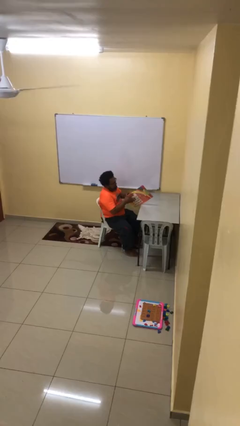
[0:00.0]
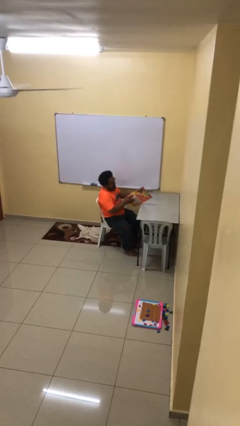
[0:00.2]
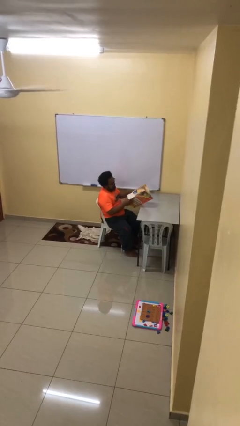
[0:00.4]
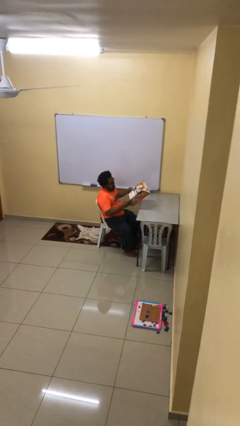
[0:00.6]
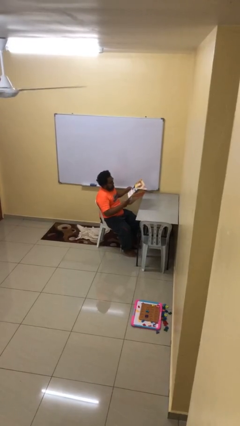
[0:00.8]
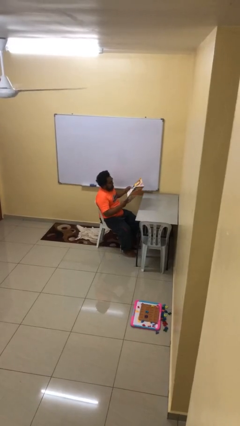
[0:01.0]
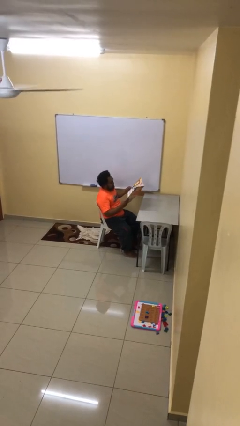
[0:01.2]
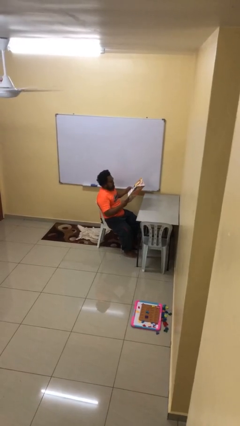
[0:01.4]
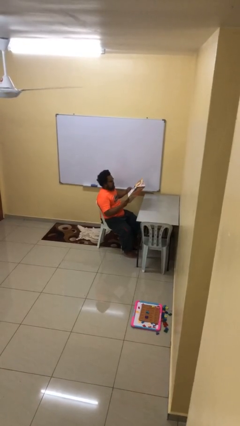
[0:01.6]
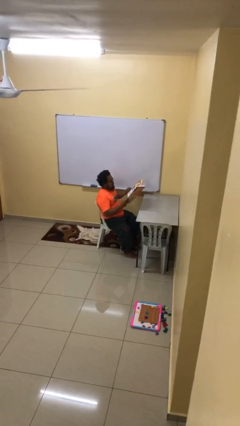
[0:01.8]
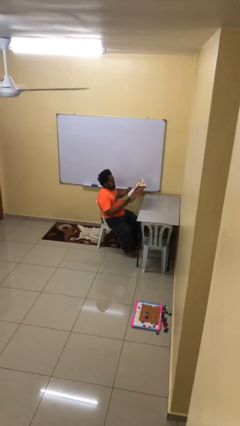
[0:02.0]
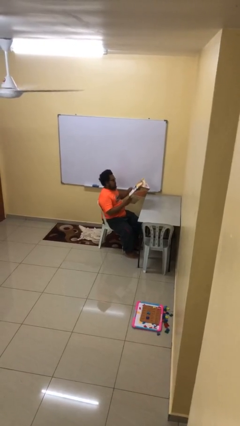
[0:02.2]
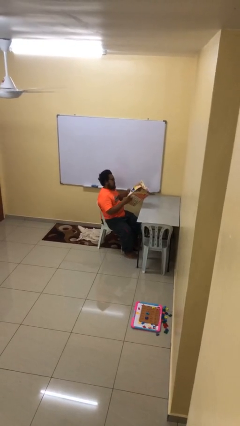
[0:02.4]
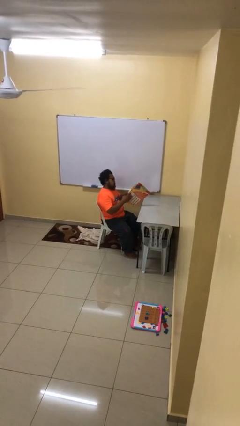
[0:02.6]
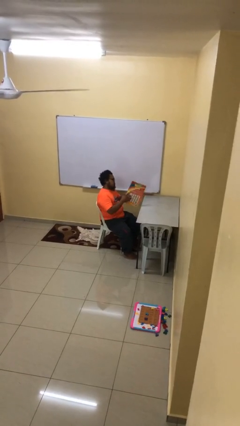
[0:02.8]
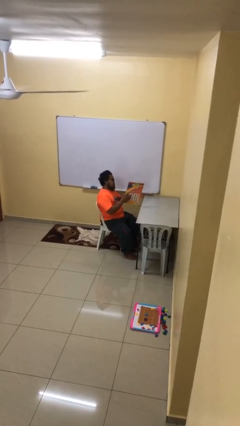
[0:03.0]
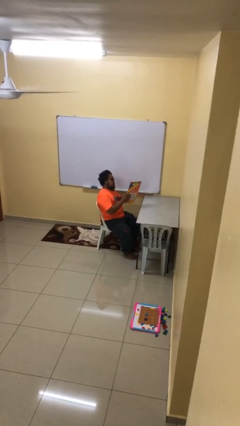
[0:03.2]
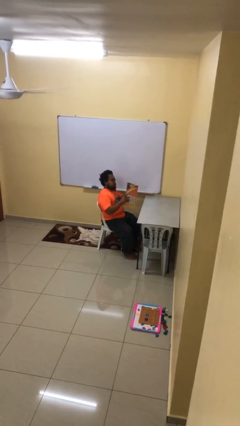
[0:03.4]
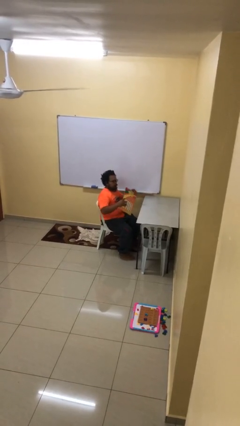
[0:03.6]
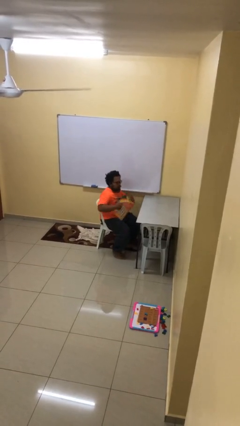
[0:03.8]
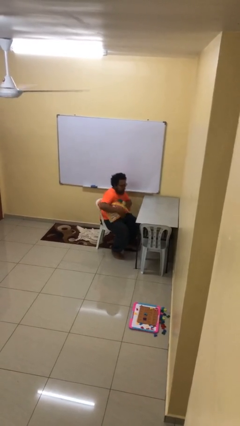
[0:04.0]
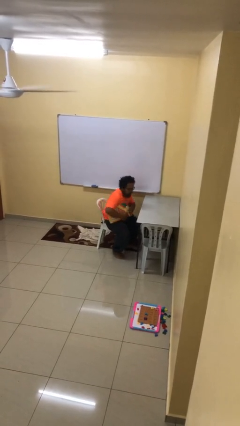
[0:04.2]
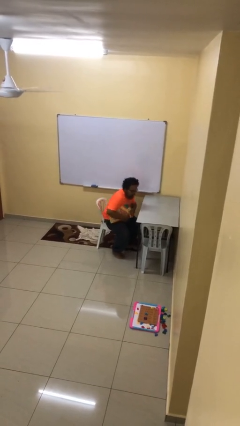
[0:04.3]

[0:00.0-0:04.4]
person reads document

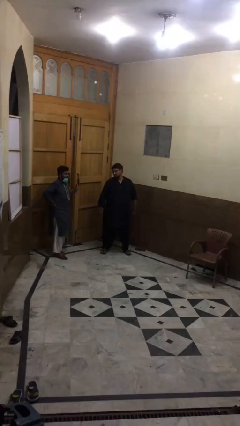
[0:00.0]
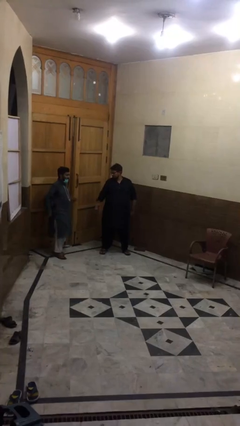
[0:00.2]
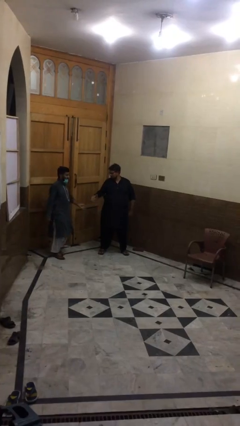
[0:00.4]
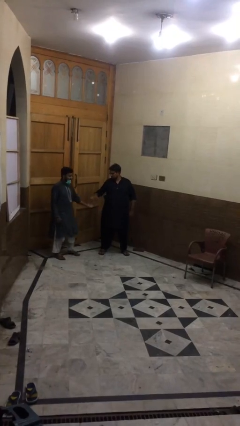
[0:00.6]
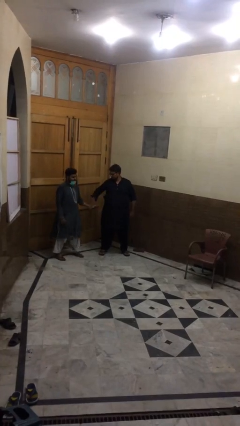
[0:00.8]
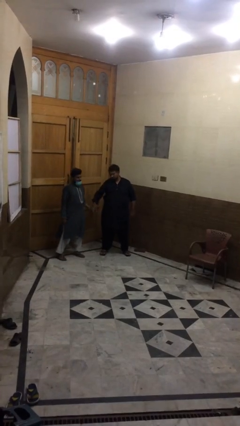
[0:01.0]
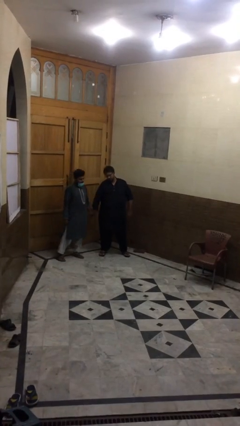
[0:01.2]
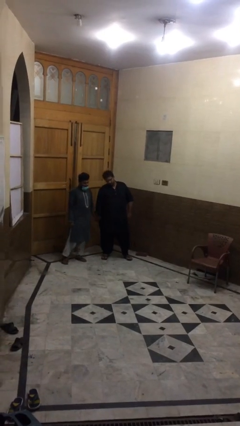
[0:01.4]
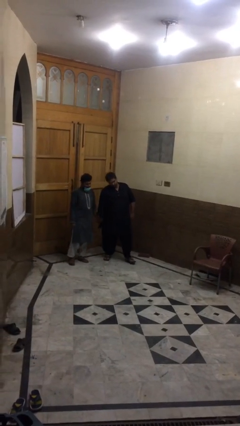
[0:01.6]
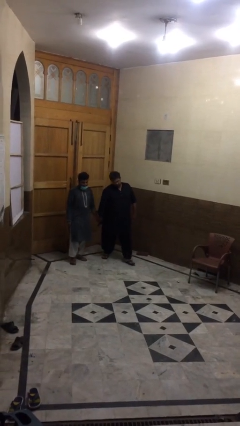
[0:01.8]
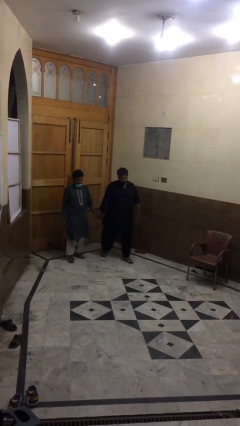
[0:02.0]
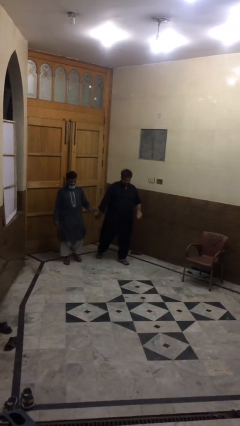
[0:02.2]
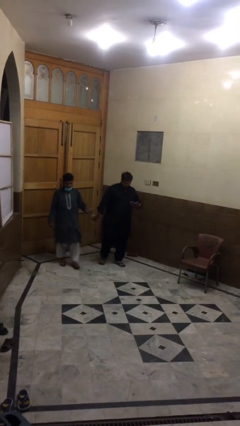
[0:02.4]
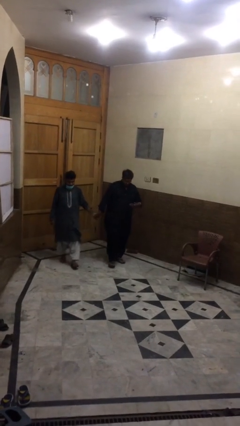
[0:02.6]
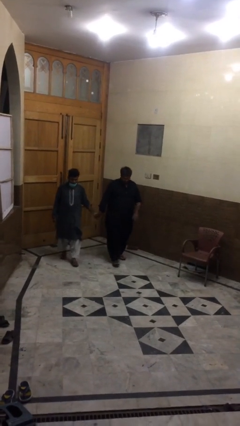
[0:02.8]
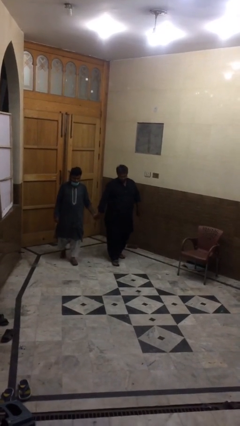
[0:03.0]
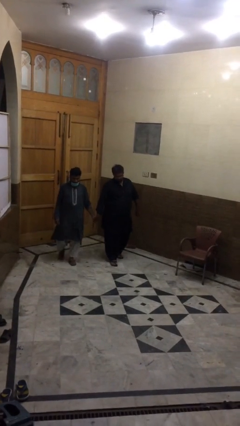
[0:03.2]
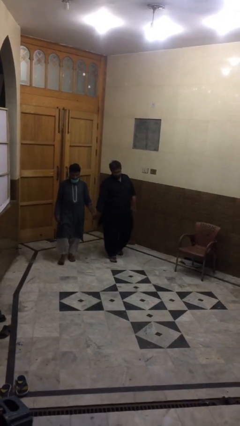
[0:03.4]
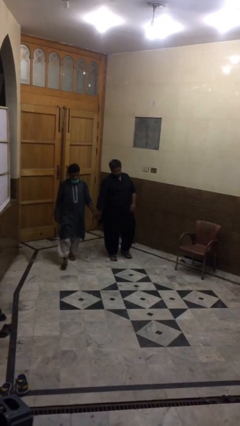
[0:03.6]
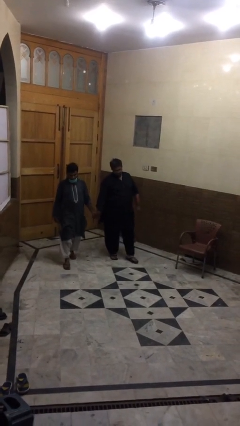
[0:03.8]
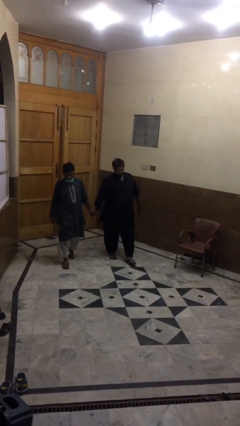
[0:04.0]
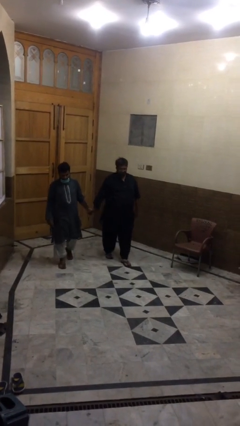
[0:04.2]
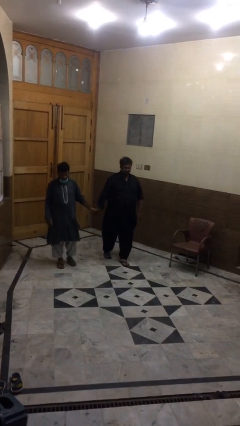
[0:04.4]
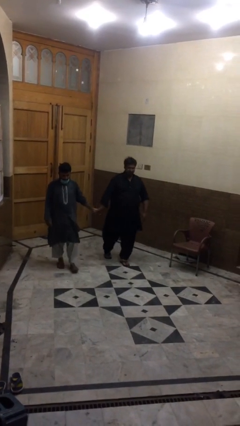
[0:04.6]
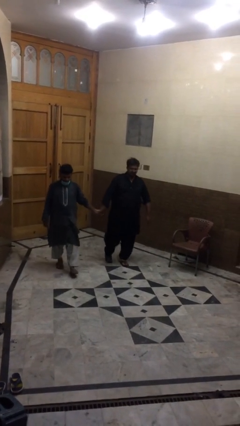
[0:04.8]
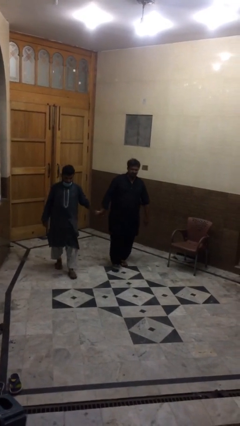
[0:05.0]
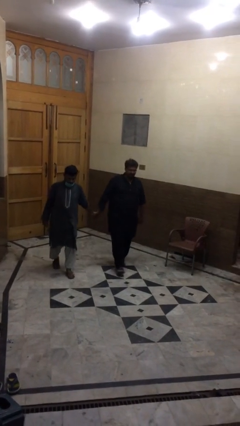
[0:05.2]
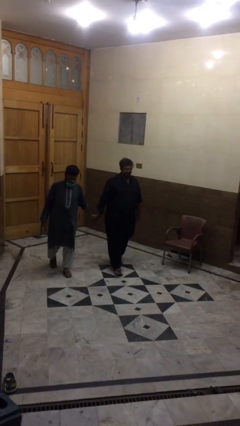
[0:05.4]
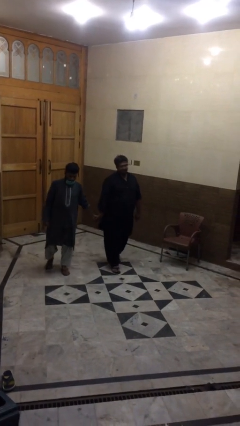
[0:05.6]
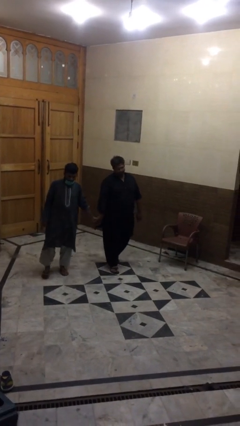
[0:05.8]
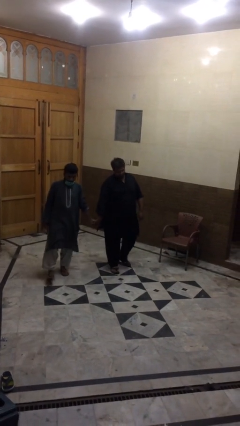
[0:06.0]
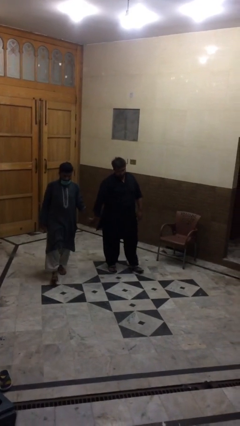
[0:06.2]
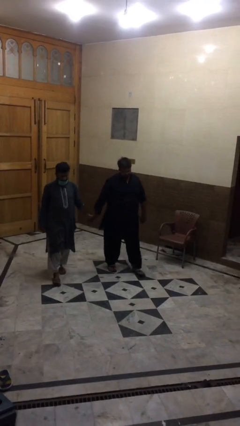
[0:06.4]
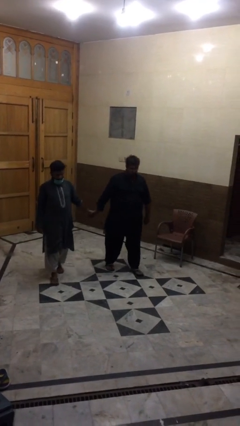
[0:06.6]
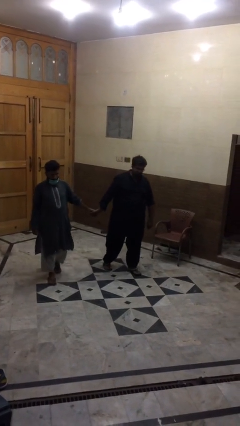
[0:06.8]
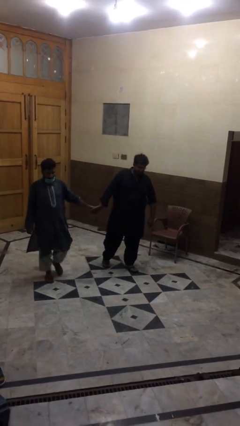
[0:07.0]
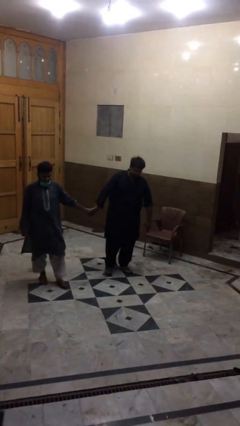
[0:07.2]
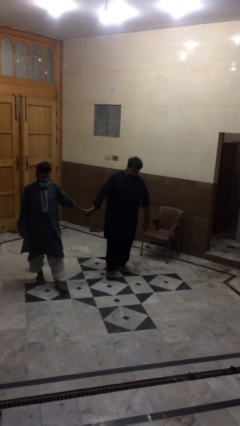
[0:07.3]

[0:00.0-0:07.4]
person holds hand

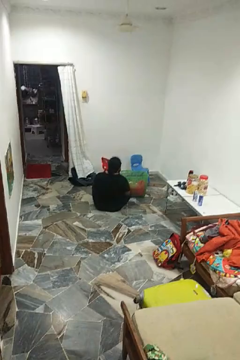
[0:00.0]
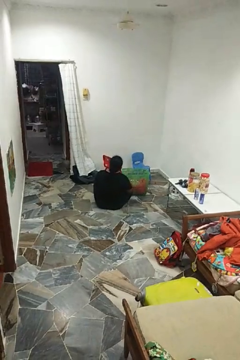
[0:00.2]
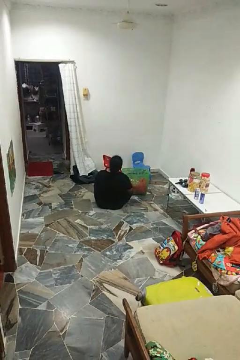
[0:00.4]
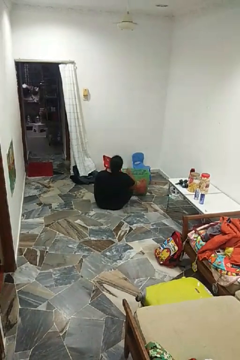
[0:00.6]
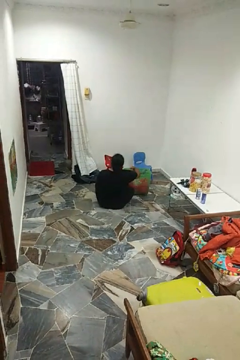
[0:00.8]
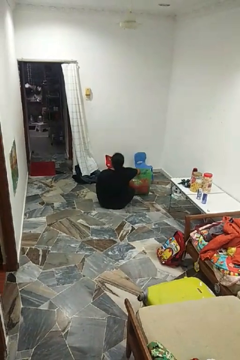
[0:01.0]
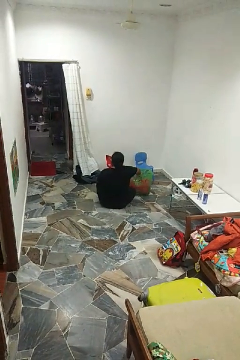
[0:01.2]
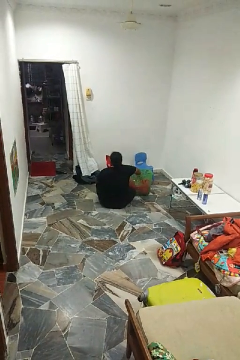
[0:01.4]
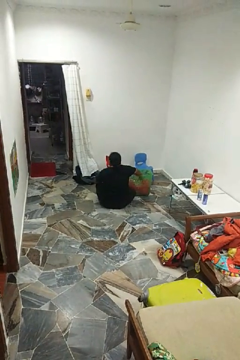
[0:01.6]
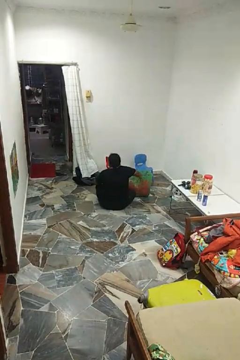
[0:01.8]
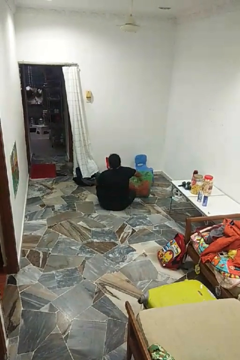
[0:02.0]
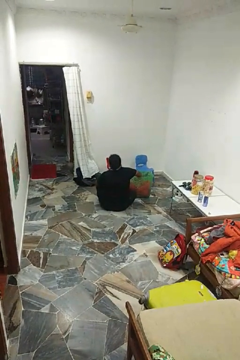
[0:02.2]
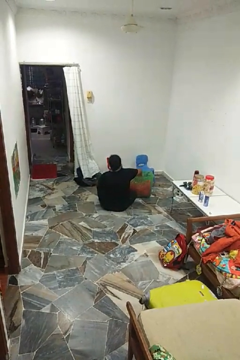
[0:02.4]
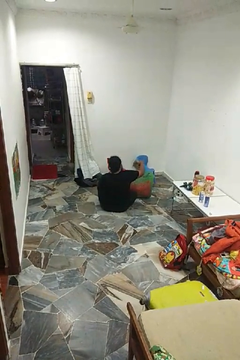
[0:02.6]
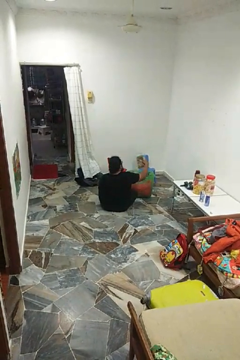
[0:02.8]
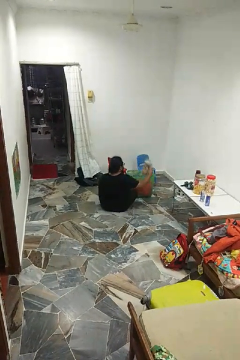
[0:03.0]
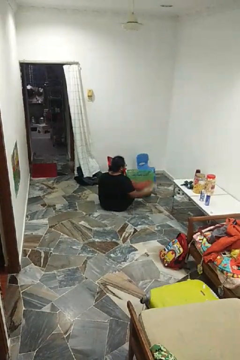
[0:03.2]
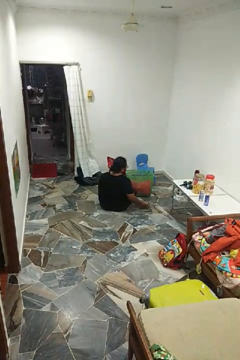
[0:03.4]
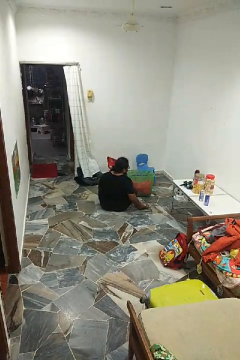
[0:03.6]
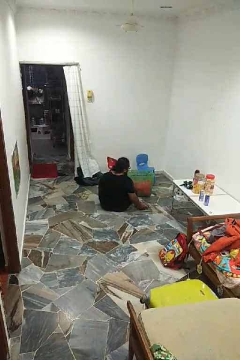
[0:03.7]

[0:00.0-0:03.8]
person takes object from basket

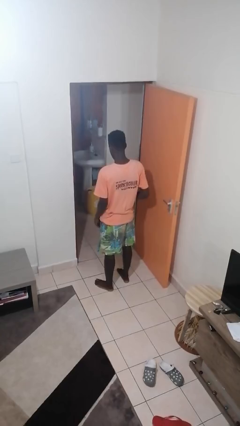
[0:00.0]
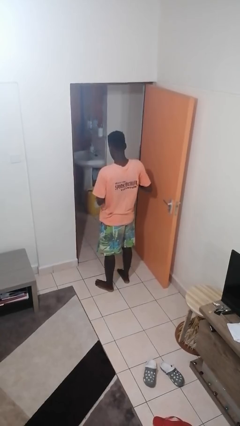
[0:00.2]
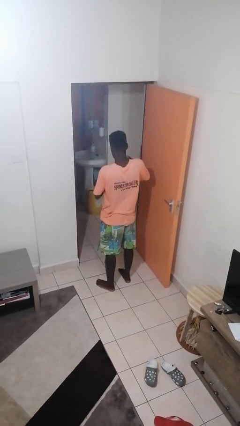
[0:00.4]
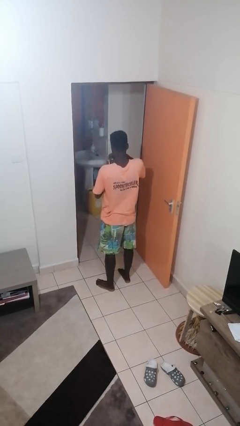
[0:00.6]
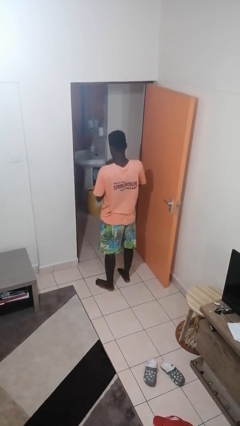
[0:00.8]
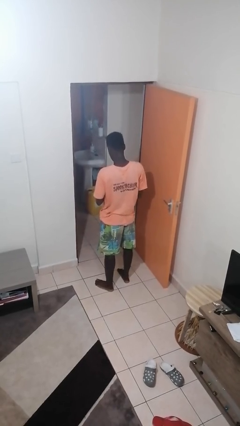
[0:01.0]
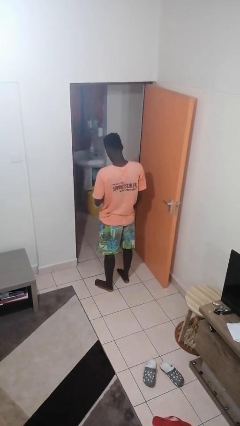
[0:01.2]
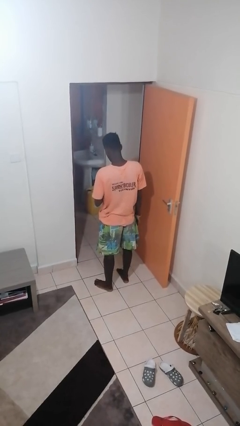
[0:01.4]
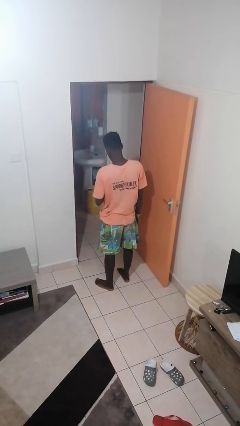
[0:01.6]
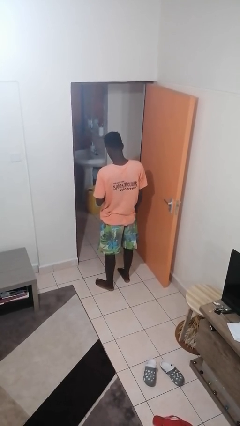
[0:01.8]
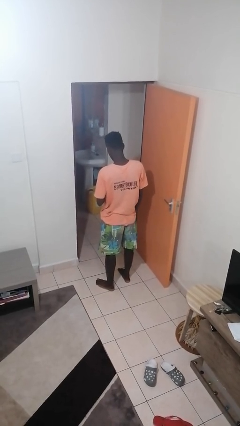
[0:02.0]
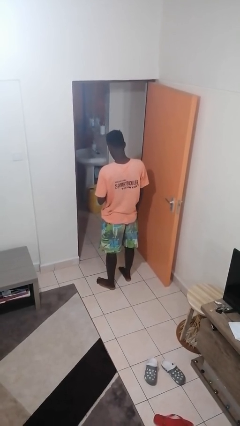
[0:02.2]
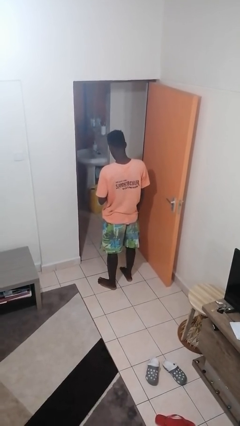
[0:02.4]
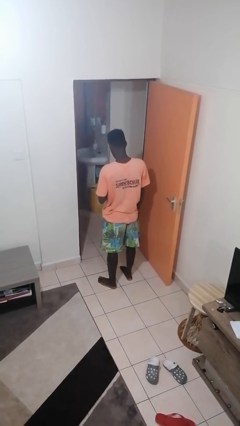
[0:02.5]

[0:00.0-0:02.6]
person takes phone from pocket

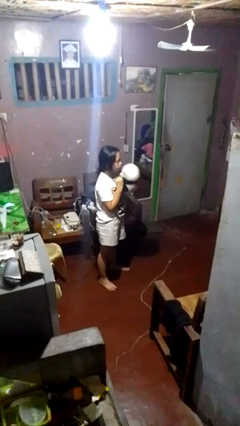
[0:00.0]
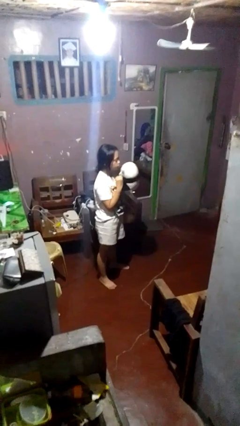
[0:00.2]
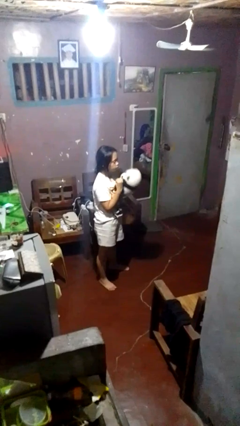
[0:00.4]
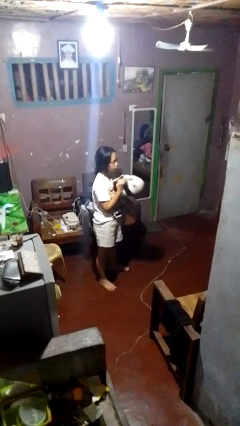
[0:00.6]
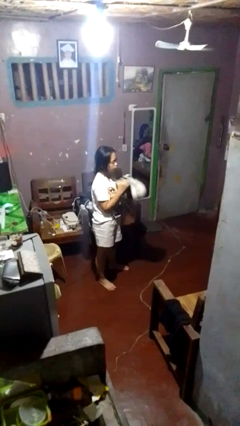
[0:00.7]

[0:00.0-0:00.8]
person drops object
